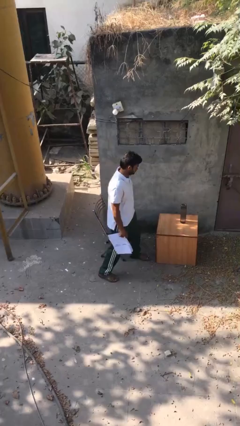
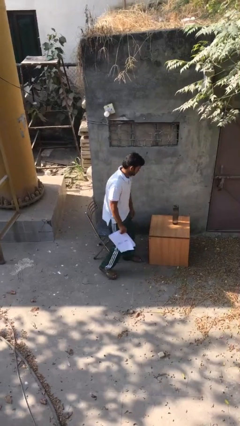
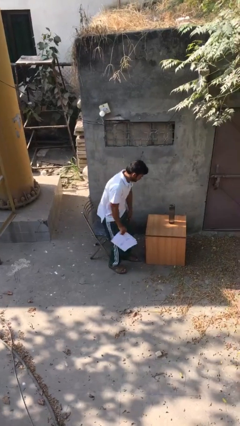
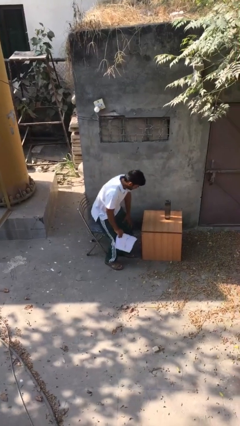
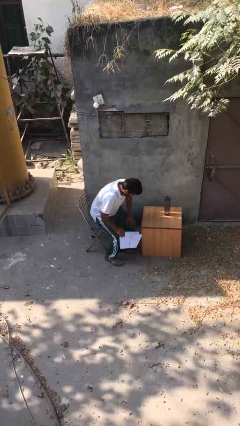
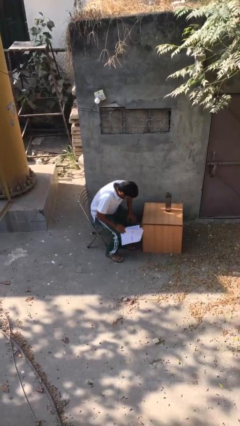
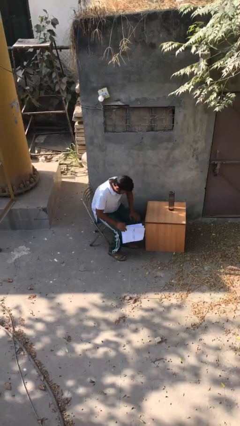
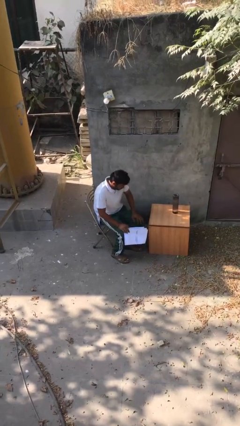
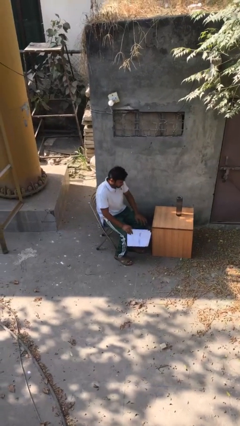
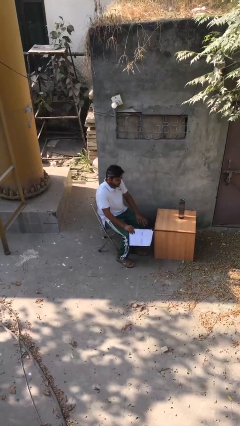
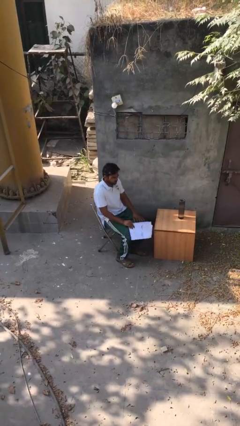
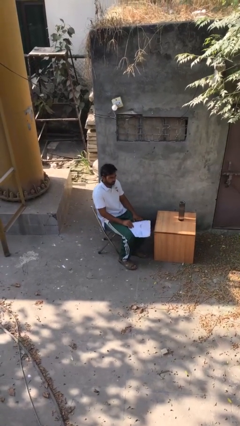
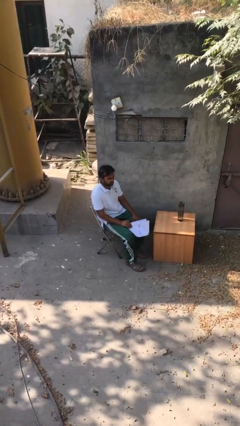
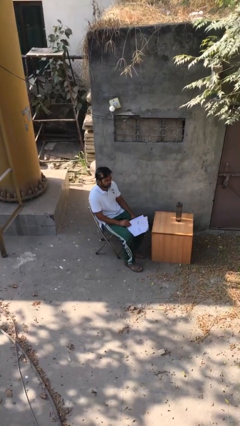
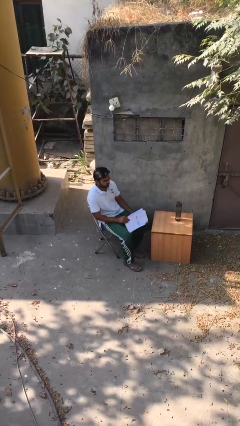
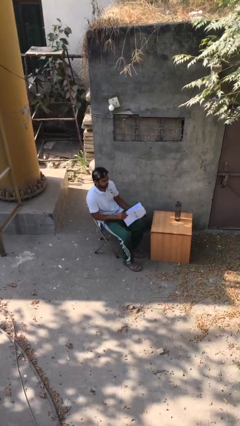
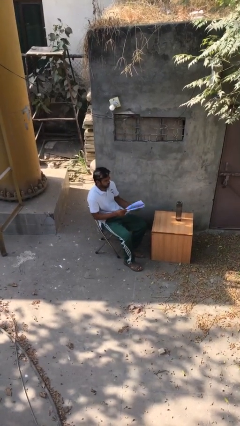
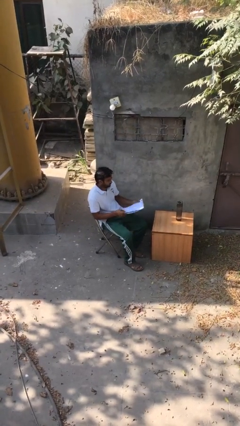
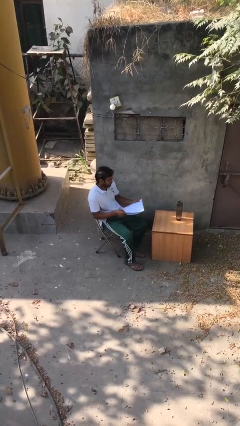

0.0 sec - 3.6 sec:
person sits down

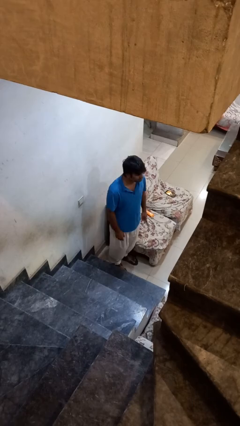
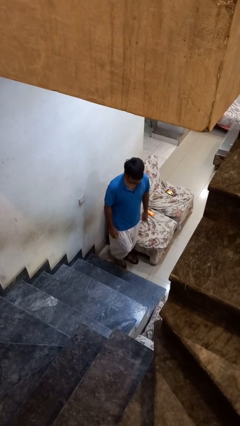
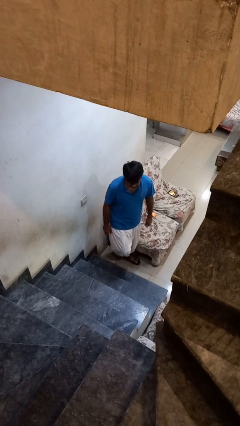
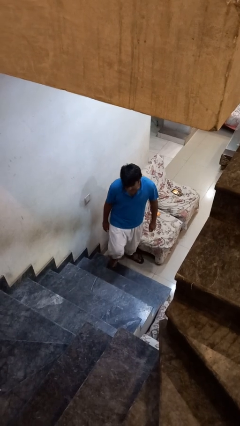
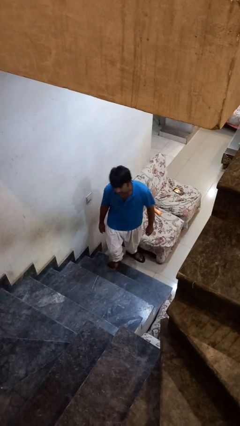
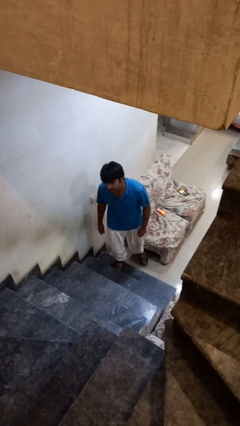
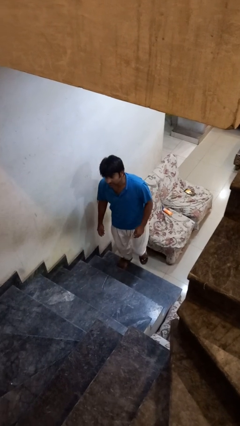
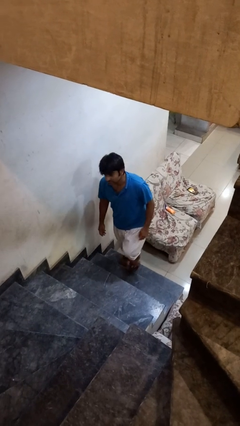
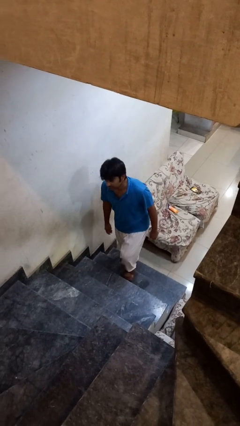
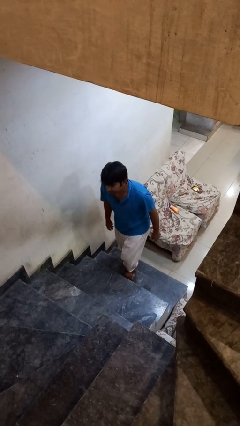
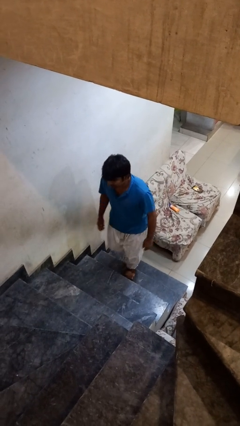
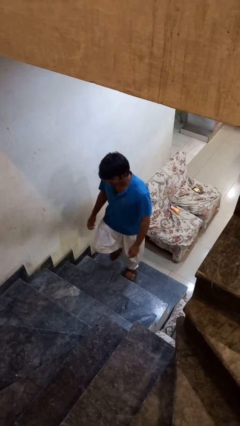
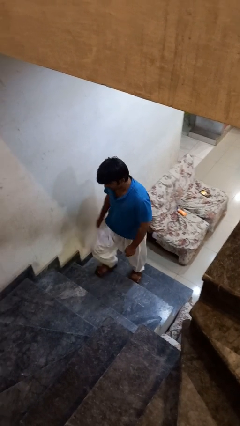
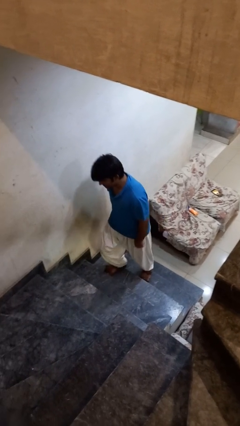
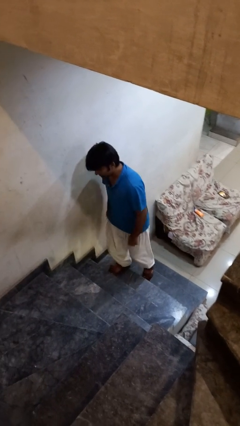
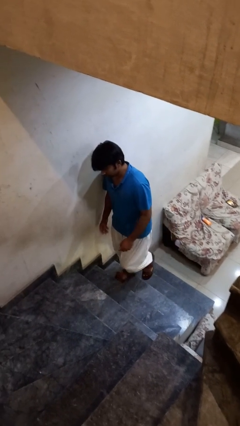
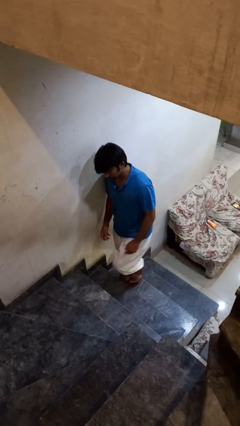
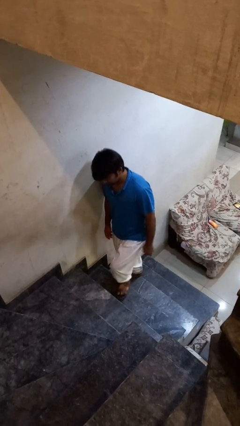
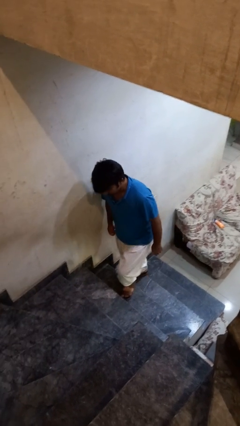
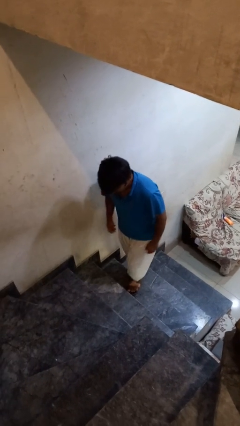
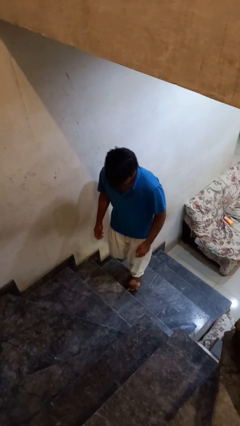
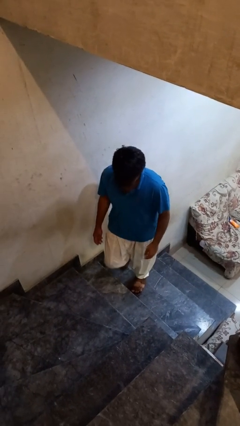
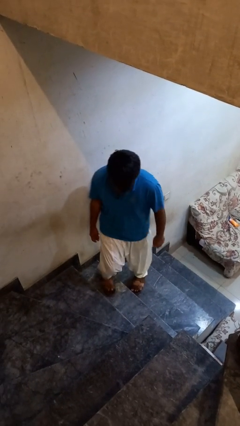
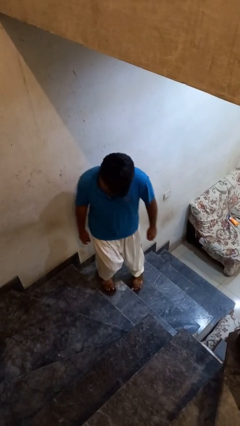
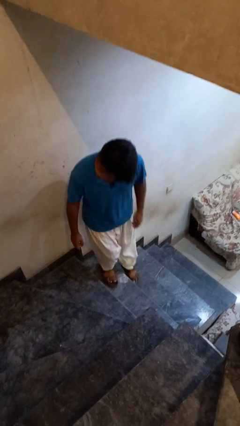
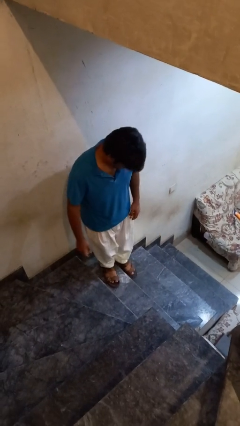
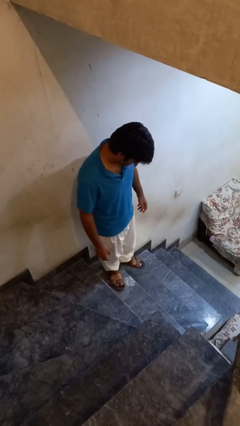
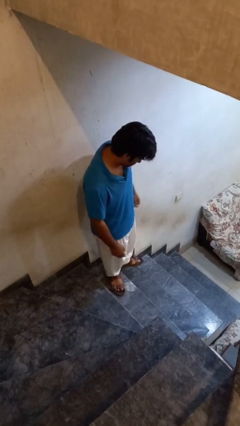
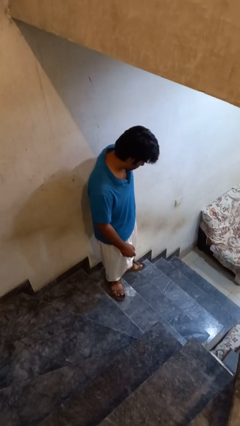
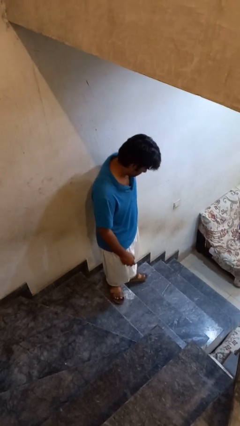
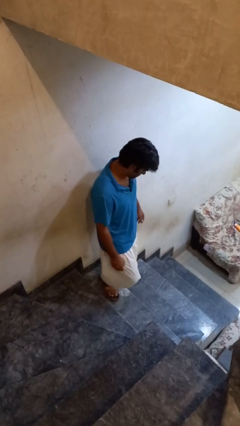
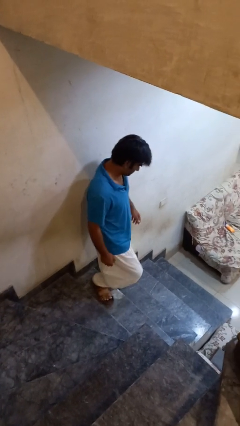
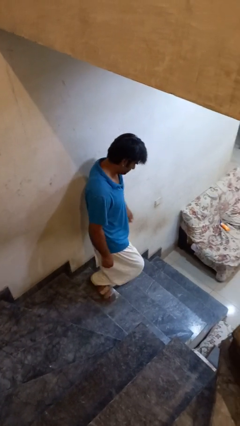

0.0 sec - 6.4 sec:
person climbs up stairs

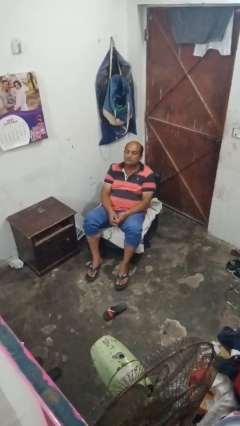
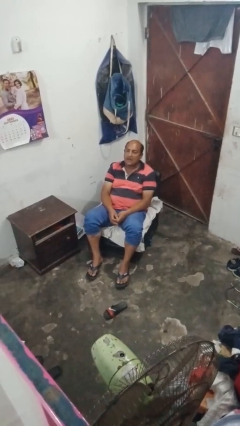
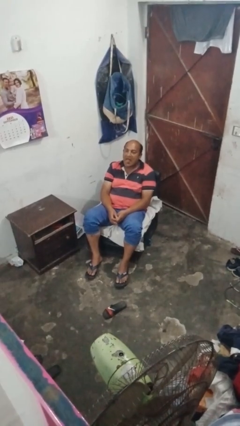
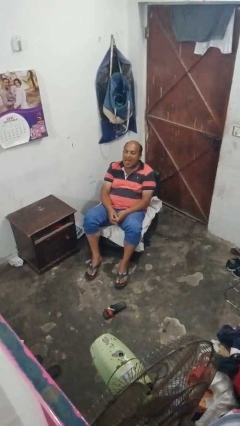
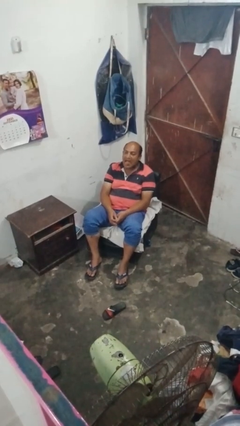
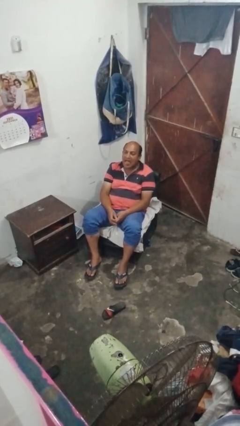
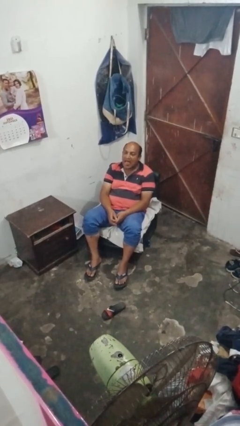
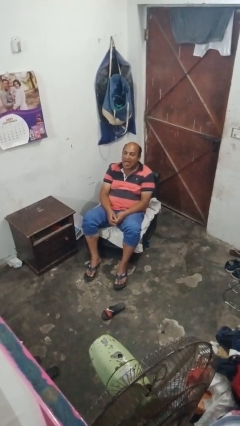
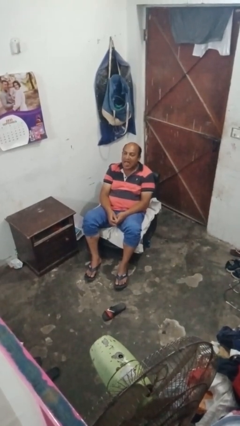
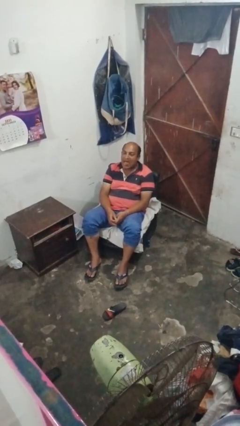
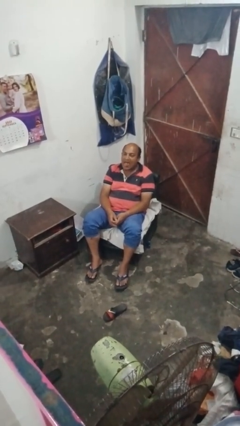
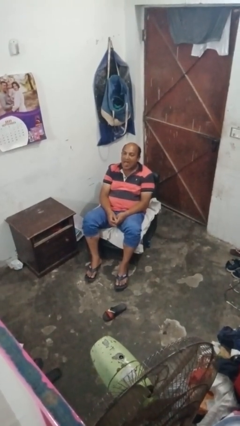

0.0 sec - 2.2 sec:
person sticks out tongue

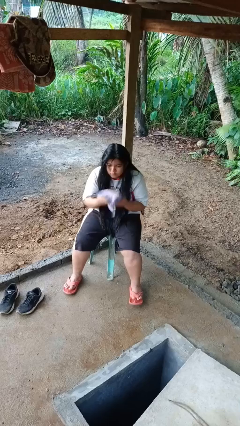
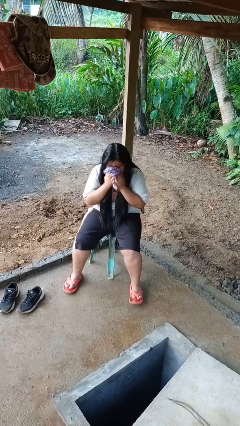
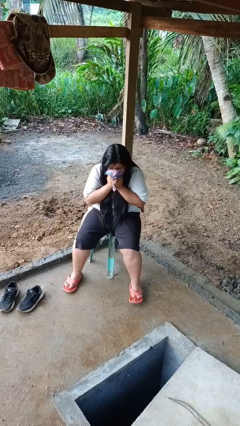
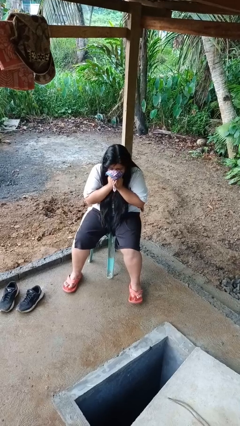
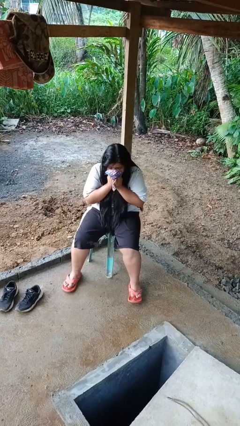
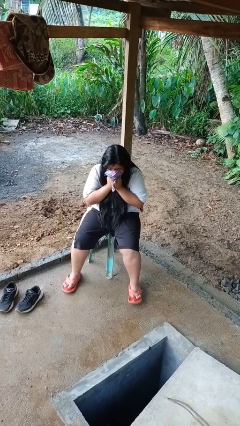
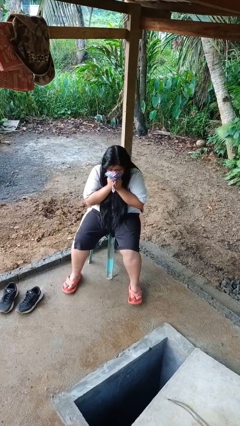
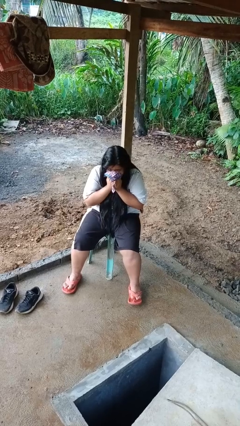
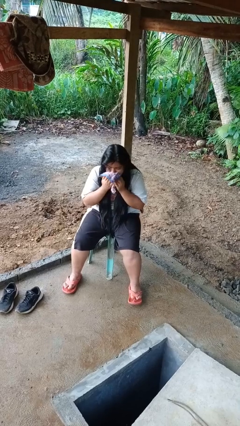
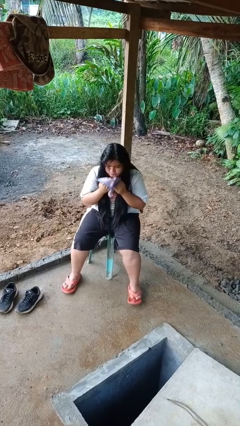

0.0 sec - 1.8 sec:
person blows nose

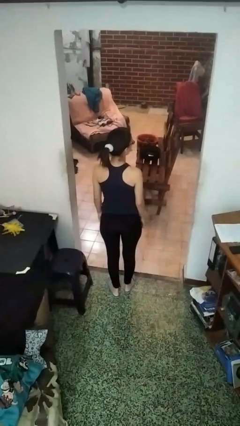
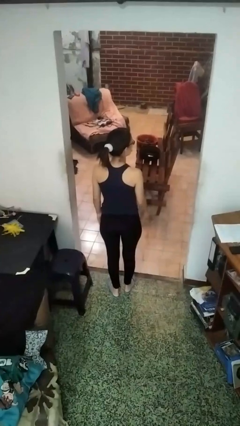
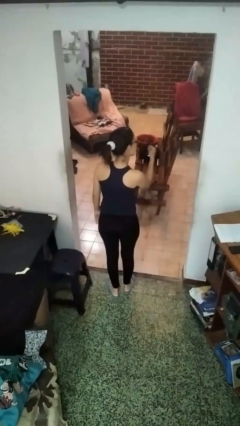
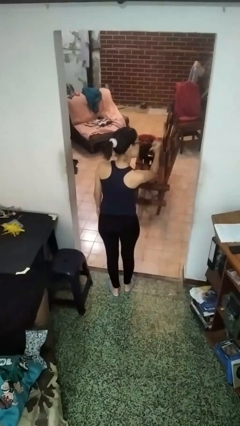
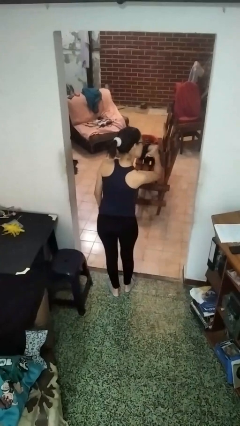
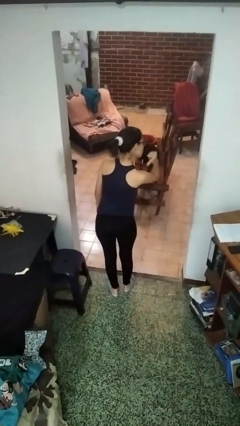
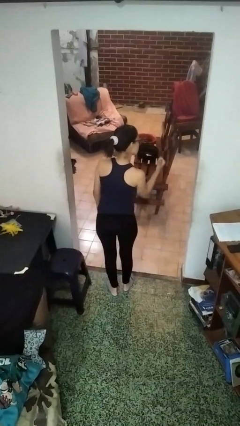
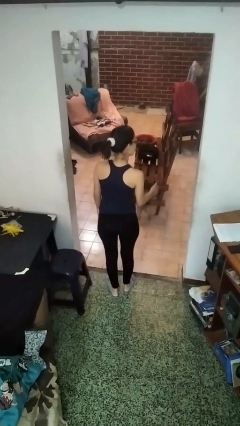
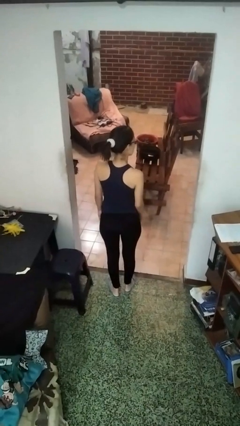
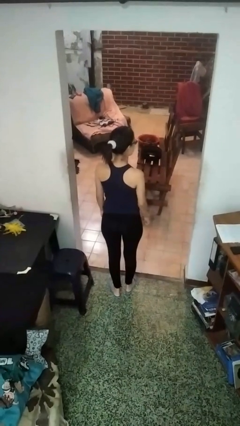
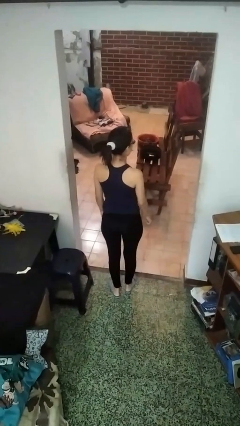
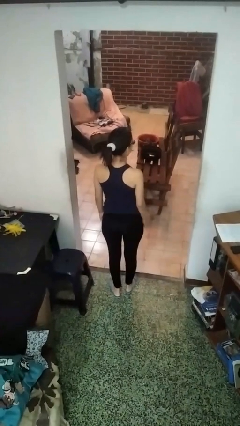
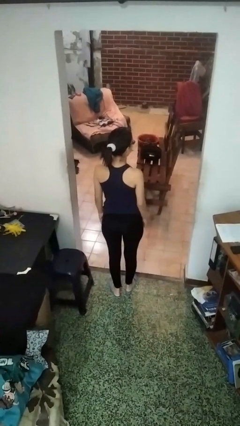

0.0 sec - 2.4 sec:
person gestures behind me

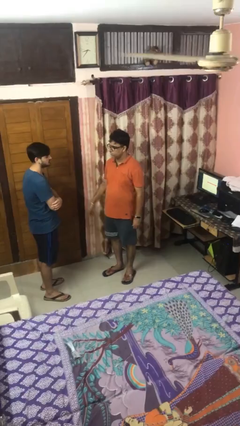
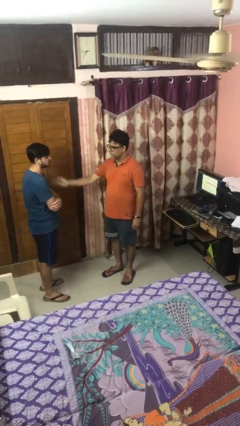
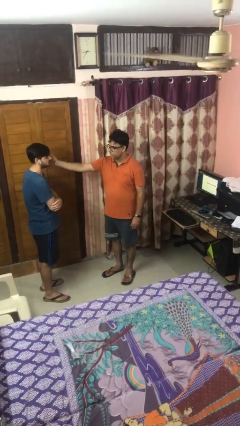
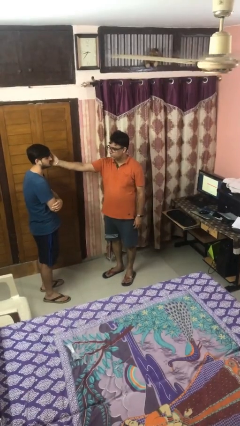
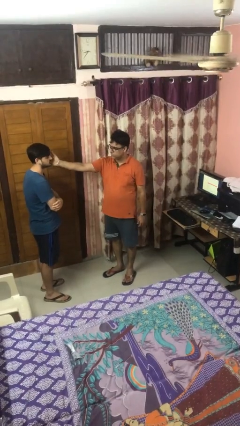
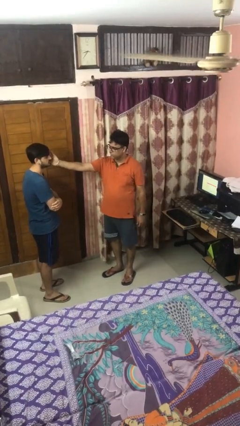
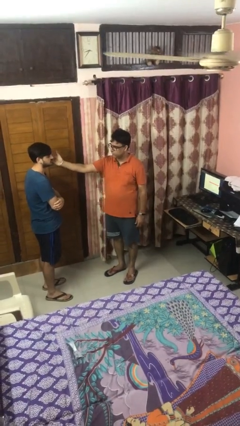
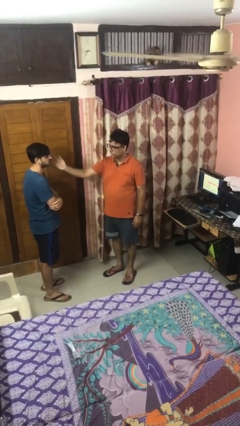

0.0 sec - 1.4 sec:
person touches face of person
